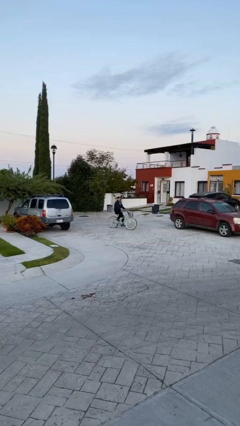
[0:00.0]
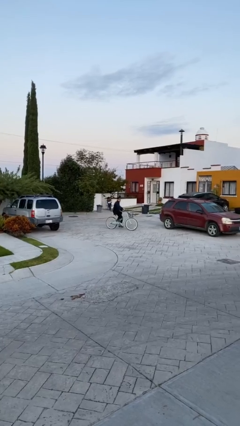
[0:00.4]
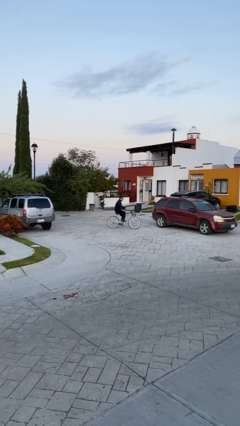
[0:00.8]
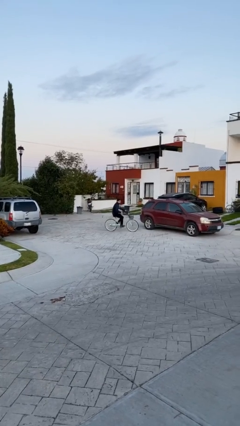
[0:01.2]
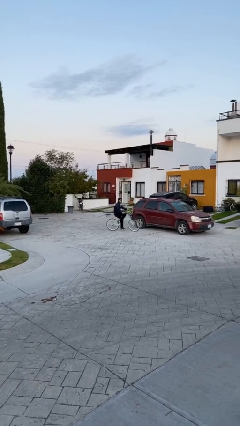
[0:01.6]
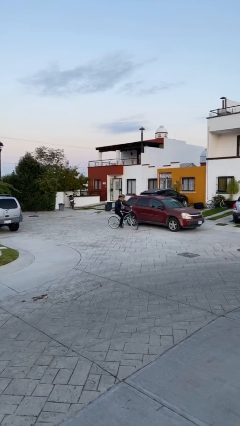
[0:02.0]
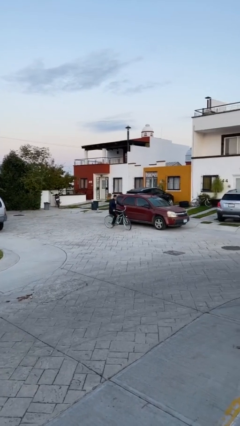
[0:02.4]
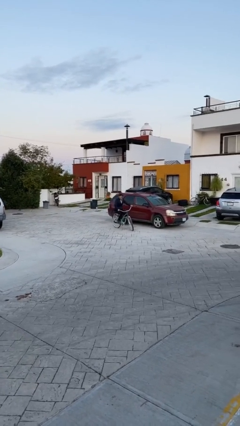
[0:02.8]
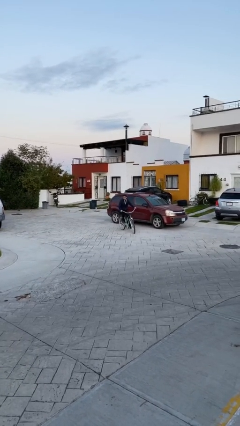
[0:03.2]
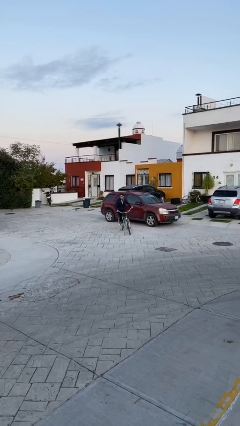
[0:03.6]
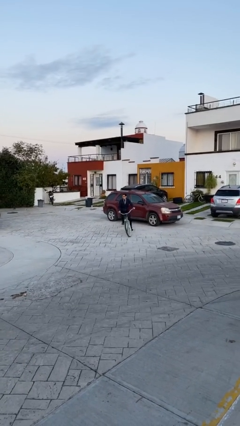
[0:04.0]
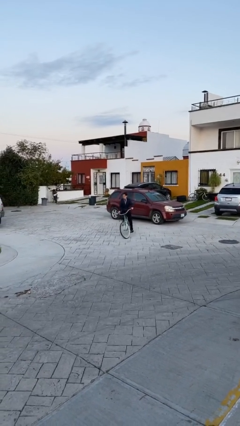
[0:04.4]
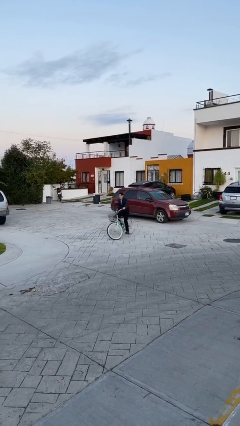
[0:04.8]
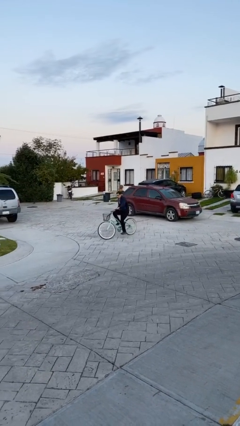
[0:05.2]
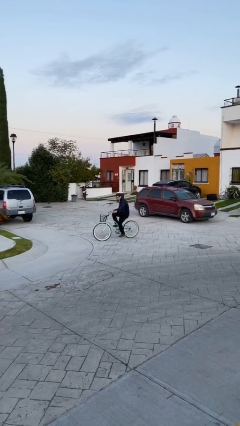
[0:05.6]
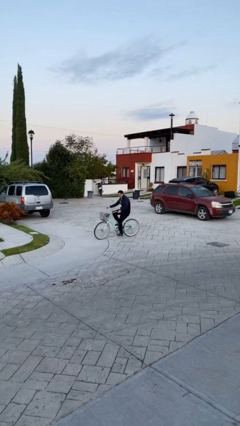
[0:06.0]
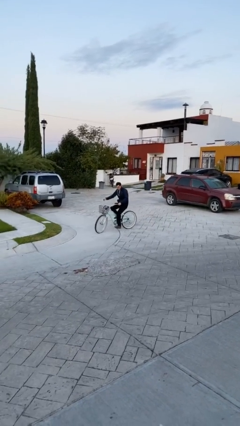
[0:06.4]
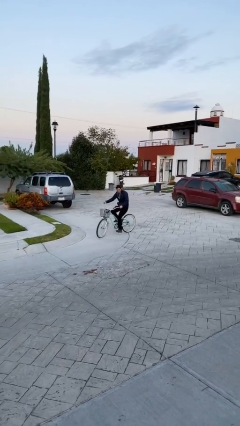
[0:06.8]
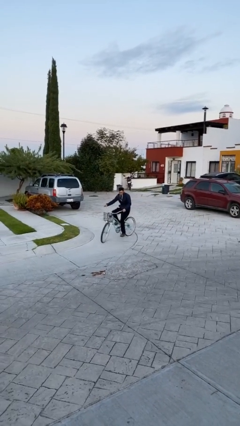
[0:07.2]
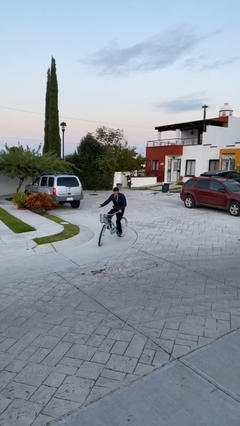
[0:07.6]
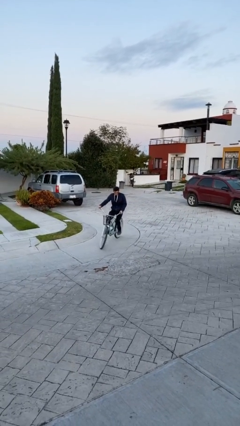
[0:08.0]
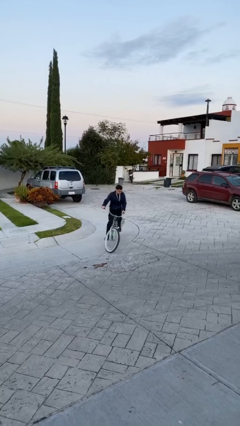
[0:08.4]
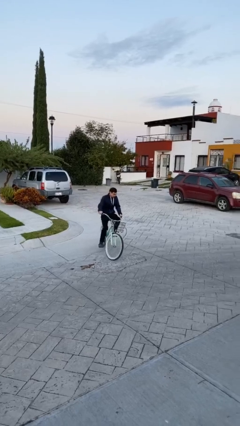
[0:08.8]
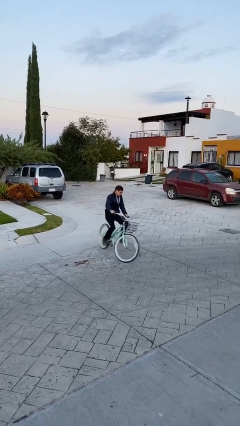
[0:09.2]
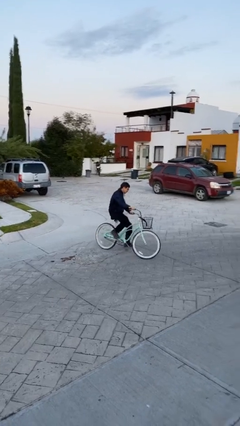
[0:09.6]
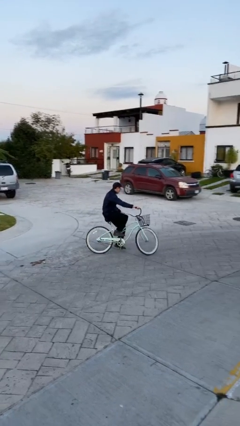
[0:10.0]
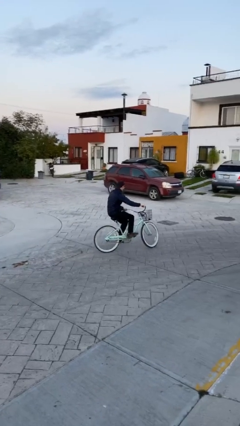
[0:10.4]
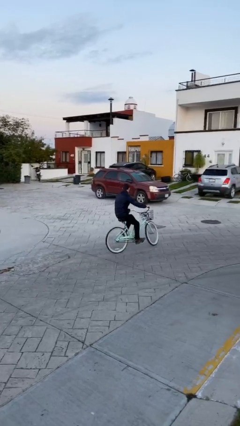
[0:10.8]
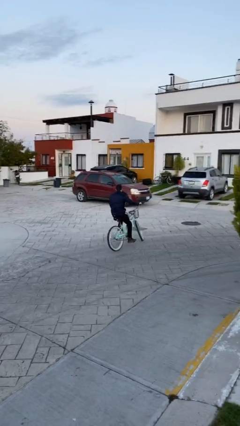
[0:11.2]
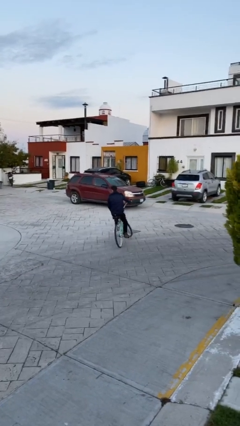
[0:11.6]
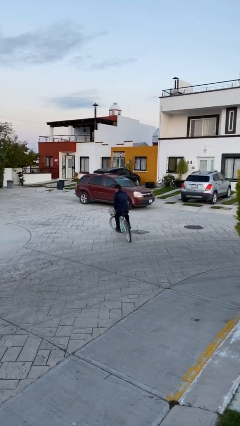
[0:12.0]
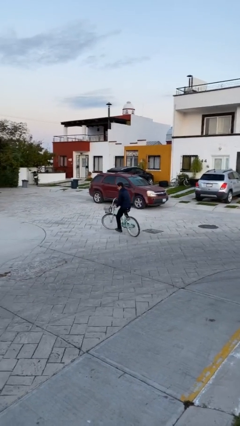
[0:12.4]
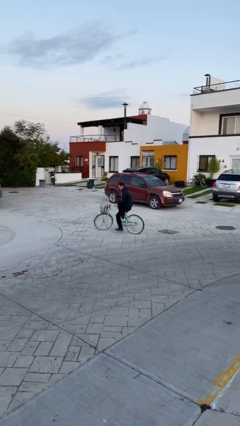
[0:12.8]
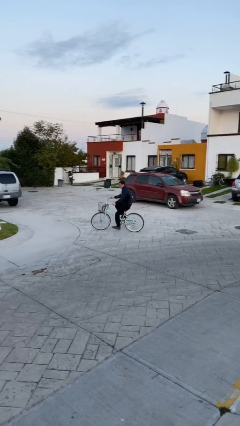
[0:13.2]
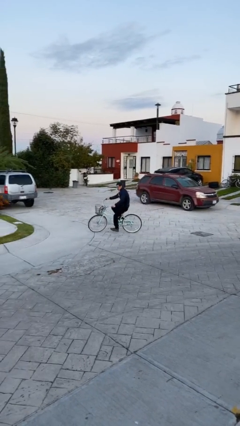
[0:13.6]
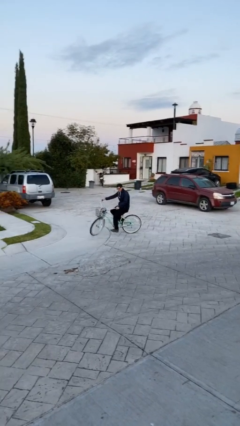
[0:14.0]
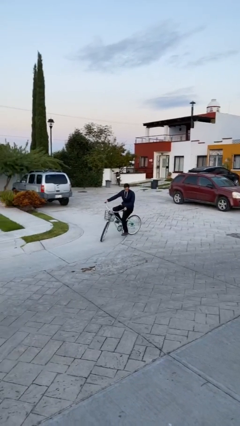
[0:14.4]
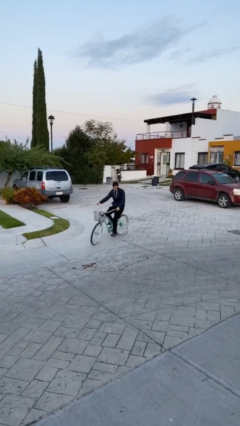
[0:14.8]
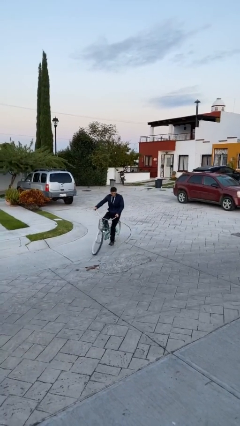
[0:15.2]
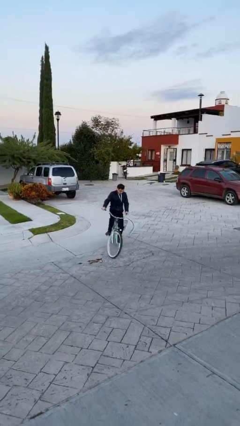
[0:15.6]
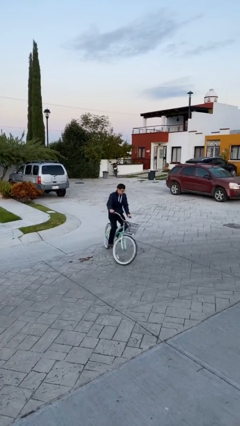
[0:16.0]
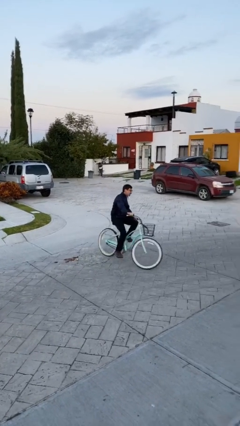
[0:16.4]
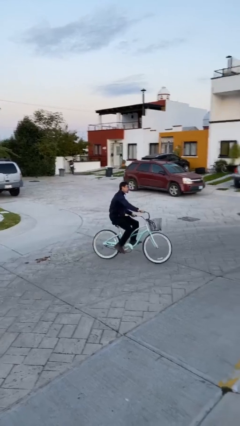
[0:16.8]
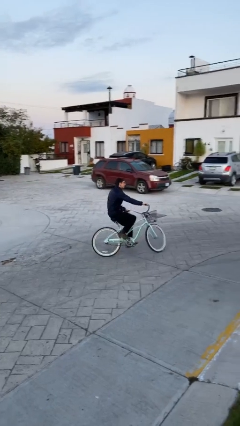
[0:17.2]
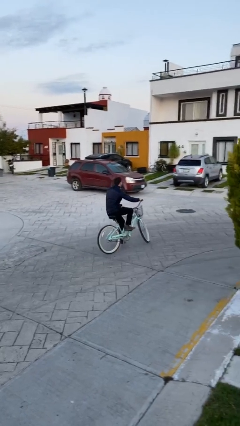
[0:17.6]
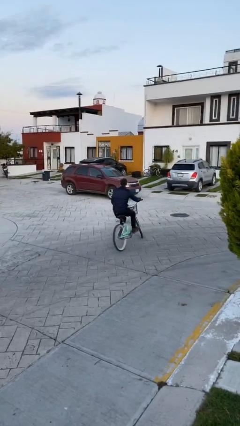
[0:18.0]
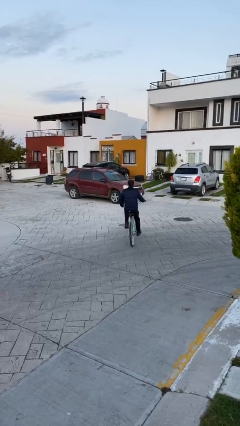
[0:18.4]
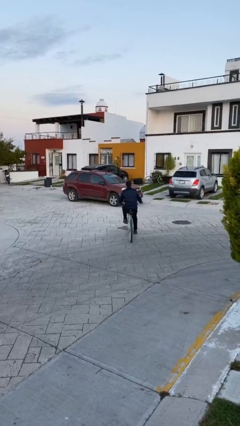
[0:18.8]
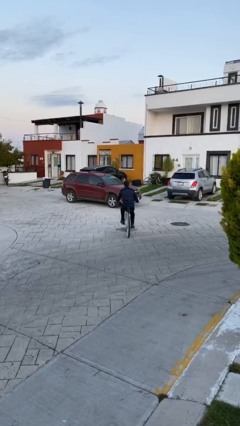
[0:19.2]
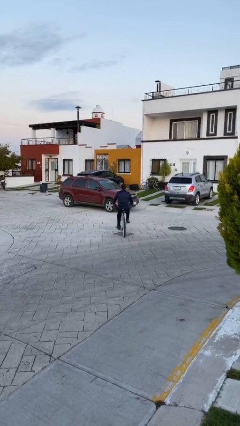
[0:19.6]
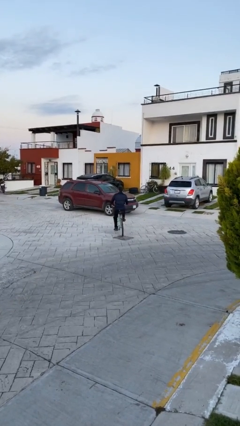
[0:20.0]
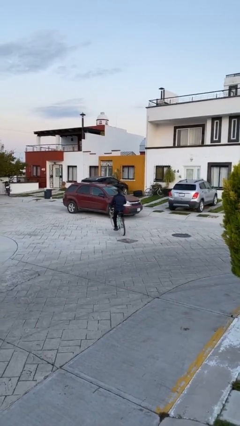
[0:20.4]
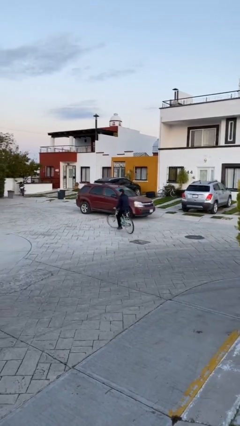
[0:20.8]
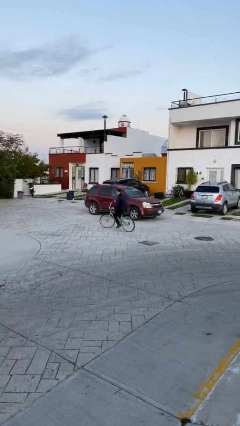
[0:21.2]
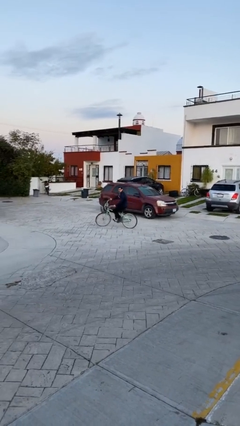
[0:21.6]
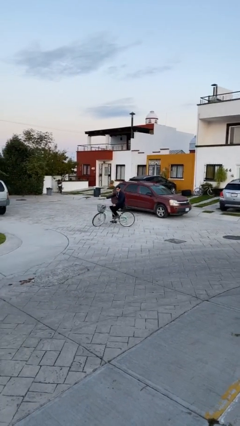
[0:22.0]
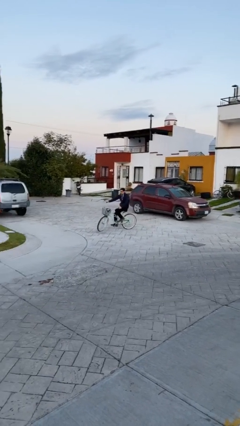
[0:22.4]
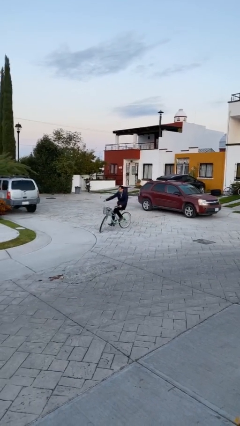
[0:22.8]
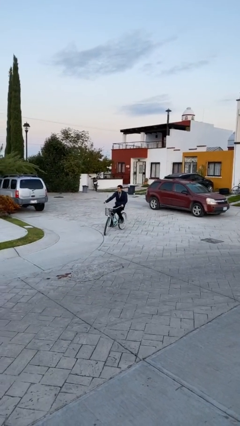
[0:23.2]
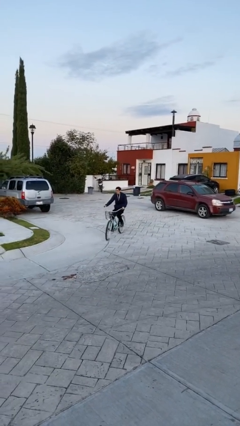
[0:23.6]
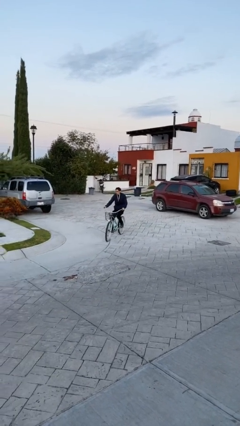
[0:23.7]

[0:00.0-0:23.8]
person rides bicycle

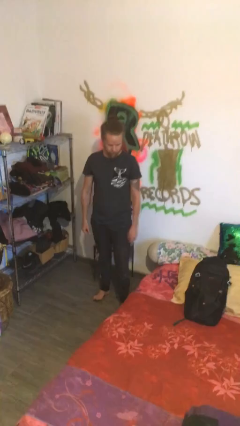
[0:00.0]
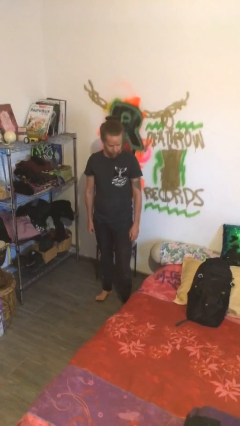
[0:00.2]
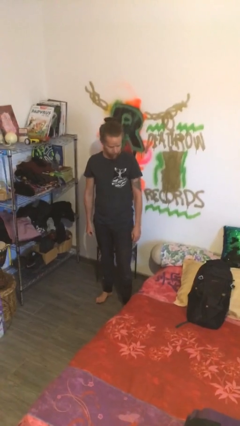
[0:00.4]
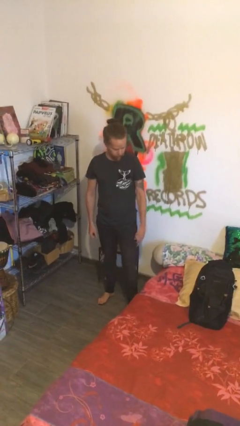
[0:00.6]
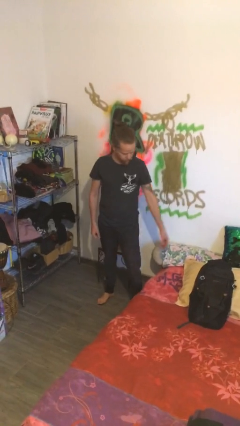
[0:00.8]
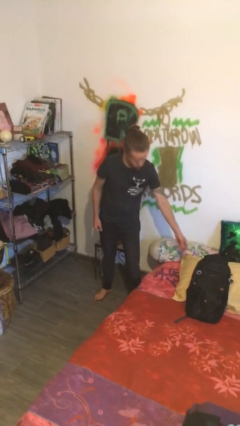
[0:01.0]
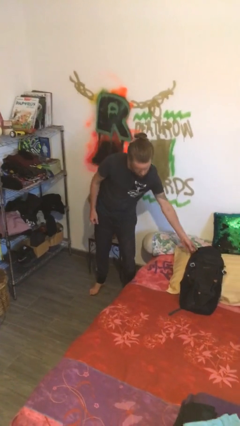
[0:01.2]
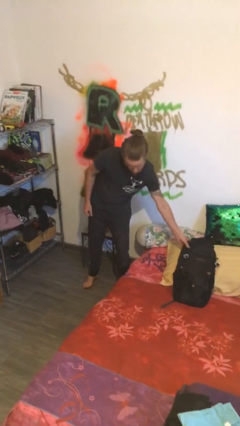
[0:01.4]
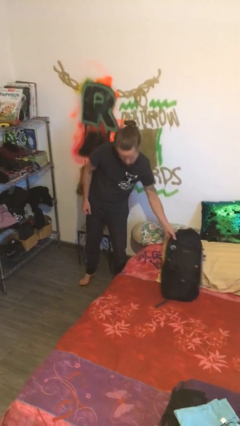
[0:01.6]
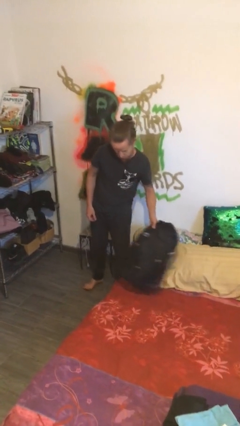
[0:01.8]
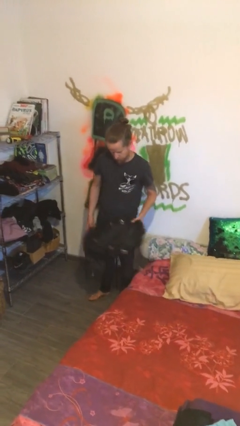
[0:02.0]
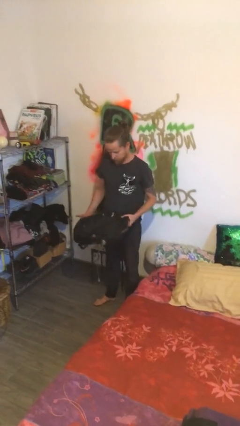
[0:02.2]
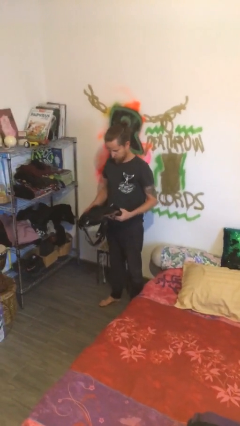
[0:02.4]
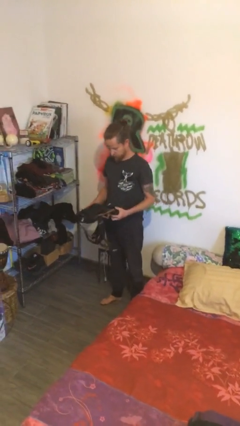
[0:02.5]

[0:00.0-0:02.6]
person picks up object from bed

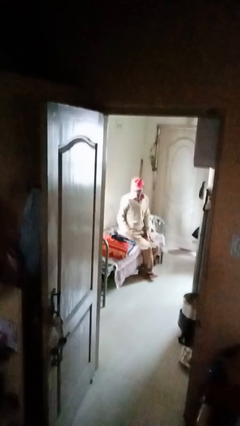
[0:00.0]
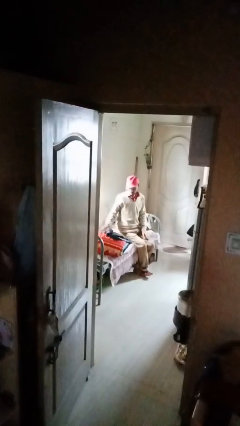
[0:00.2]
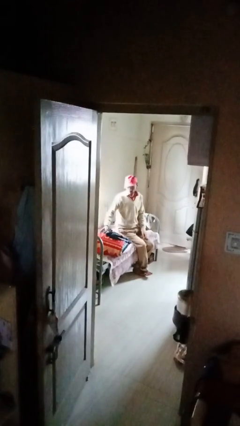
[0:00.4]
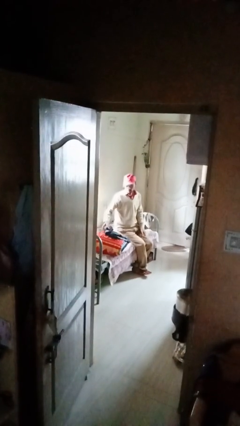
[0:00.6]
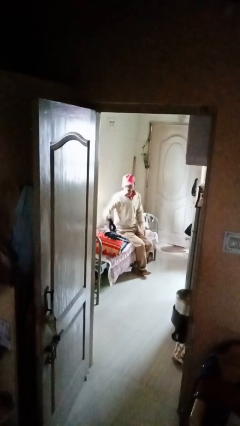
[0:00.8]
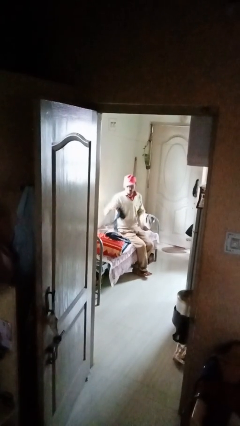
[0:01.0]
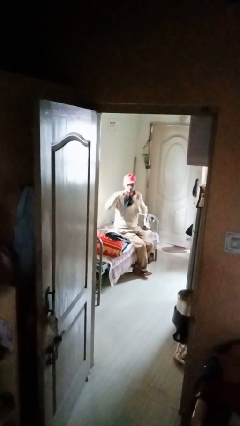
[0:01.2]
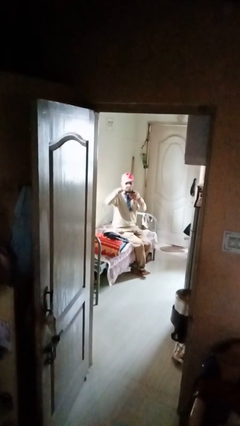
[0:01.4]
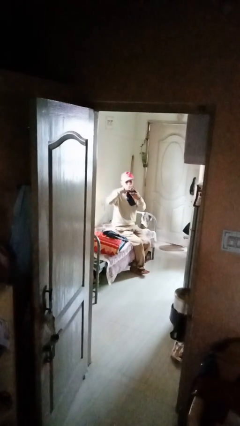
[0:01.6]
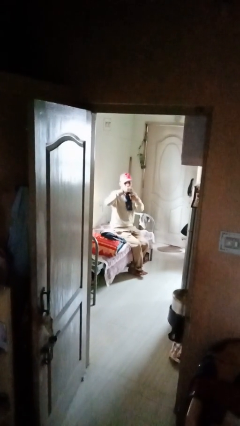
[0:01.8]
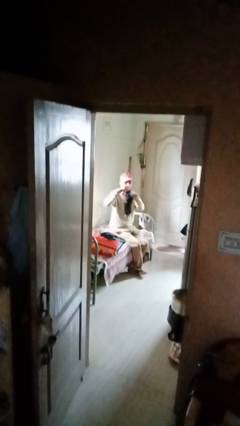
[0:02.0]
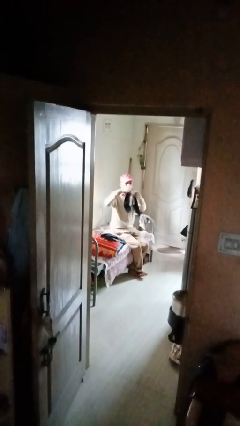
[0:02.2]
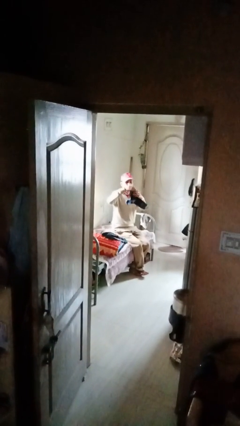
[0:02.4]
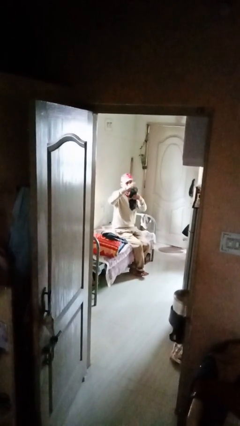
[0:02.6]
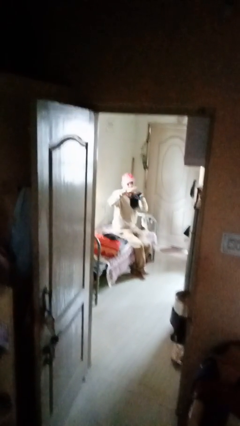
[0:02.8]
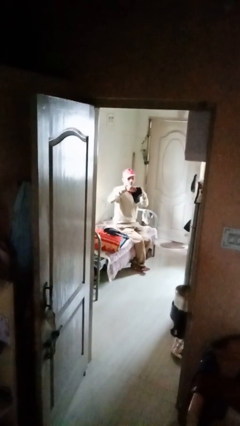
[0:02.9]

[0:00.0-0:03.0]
person folds socks
